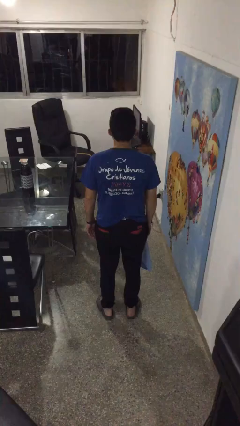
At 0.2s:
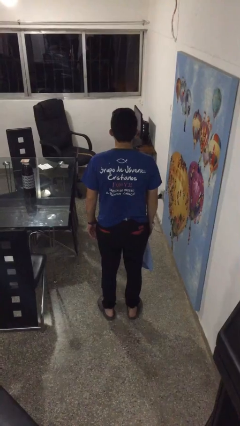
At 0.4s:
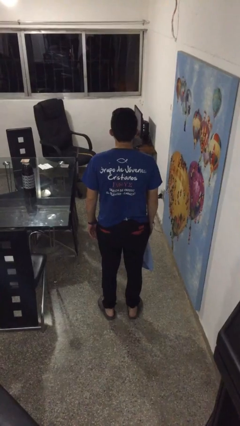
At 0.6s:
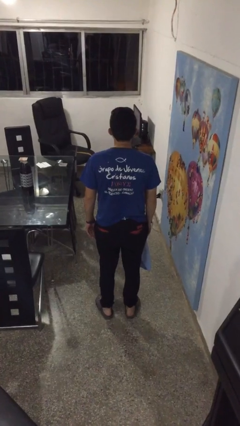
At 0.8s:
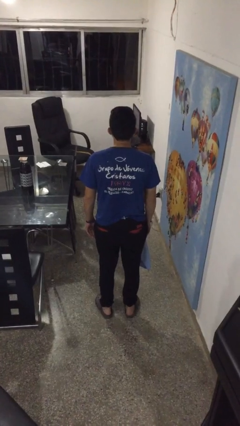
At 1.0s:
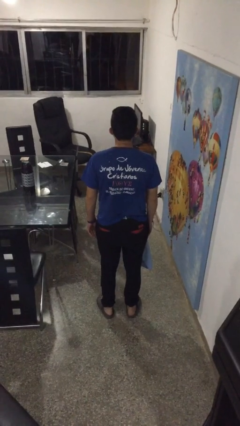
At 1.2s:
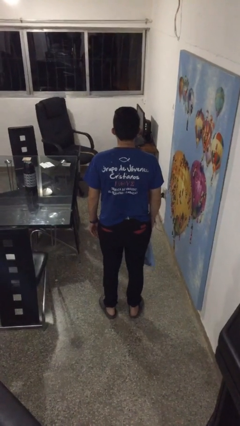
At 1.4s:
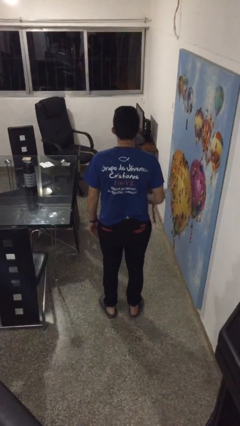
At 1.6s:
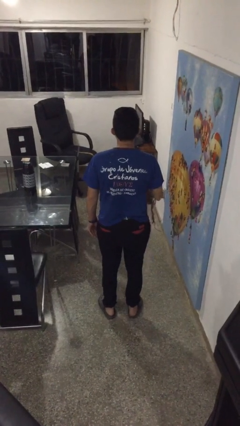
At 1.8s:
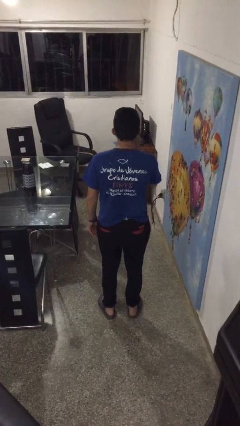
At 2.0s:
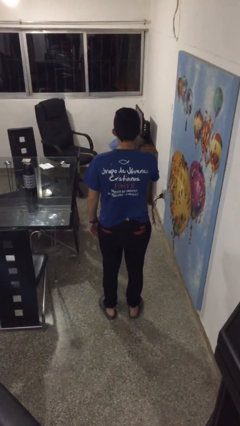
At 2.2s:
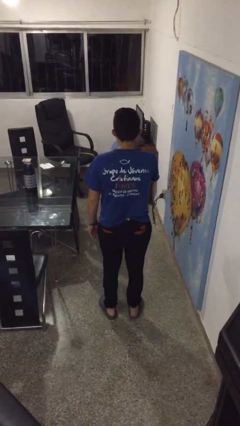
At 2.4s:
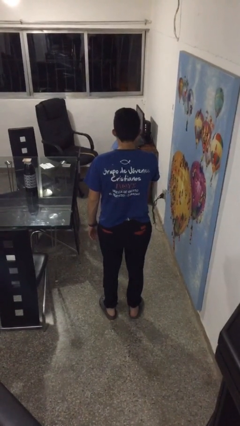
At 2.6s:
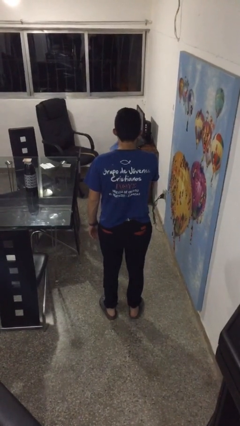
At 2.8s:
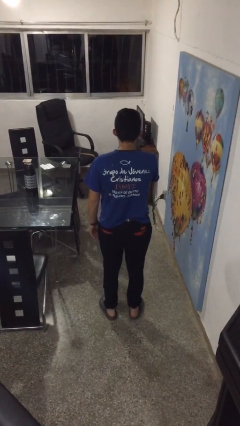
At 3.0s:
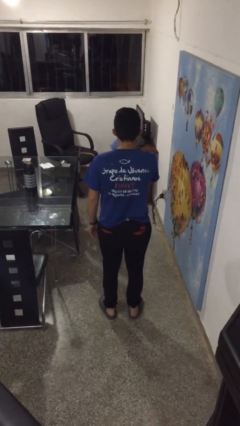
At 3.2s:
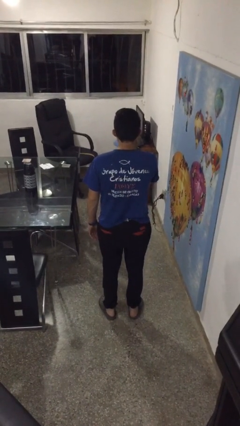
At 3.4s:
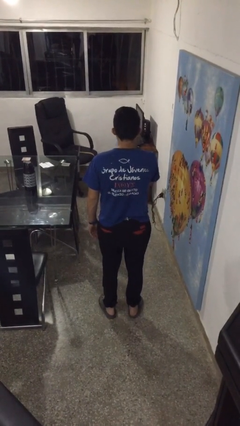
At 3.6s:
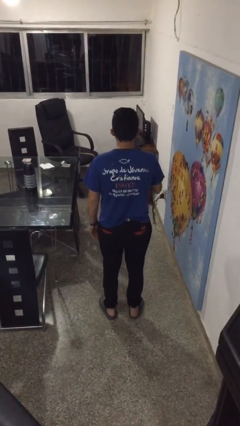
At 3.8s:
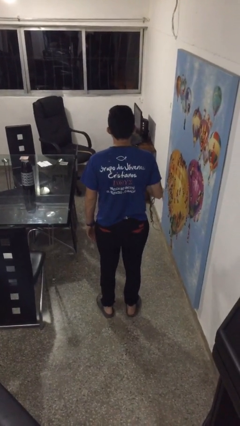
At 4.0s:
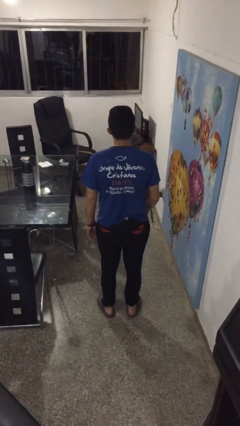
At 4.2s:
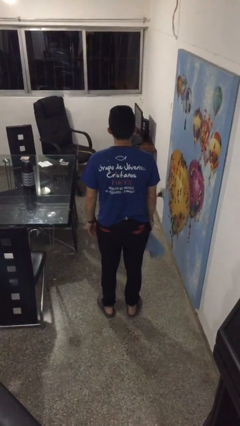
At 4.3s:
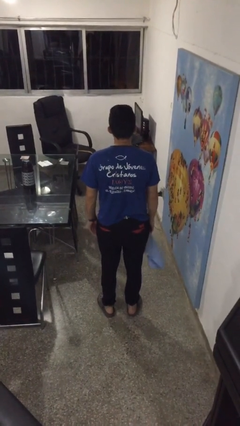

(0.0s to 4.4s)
person wipes mouth with napkin

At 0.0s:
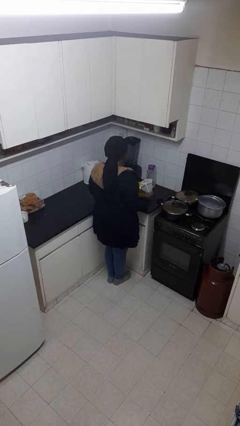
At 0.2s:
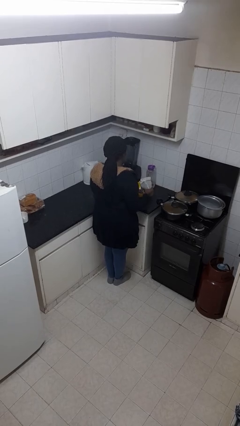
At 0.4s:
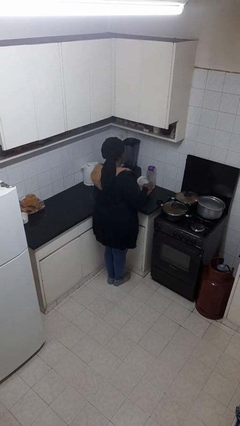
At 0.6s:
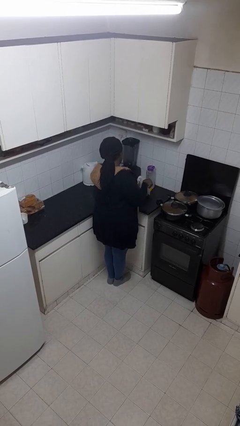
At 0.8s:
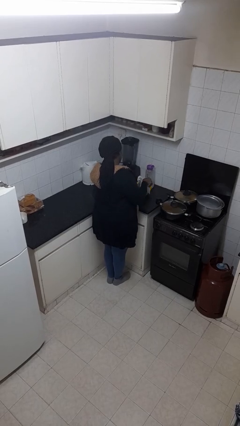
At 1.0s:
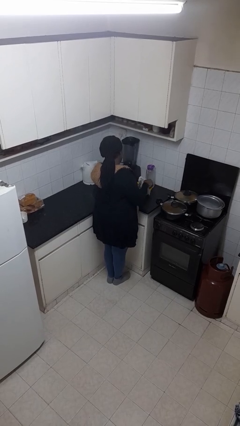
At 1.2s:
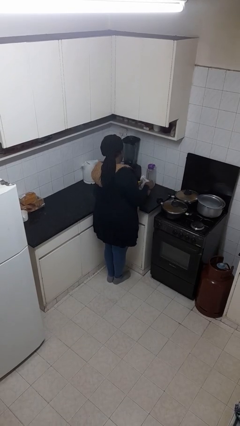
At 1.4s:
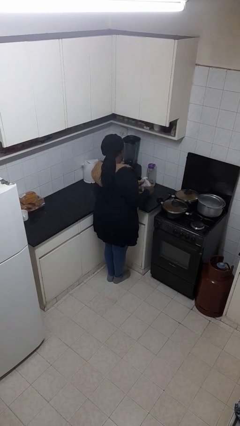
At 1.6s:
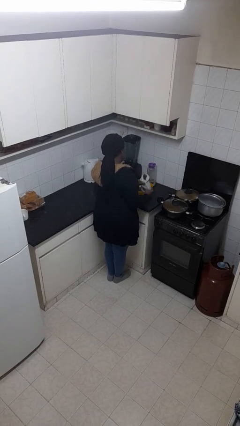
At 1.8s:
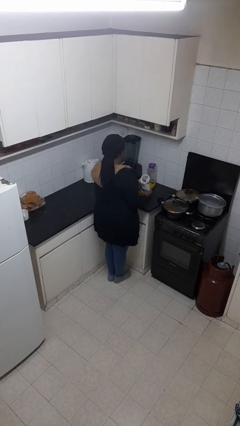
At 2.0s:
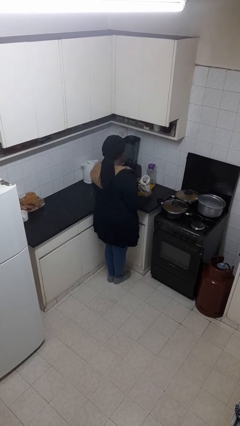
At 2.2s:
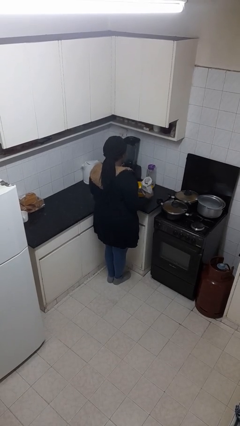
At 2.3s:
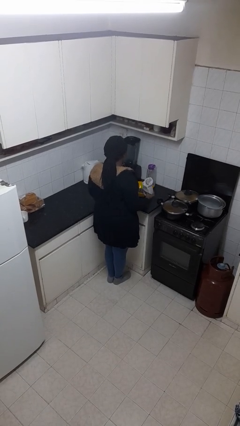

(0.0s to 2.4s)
person pours into bowl

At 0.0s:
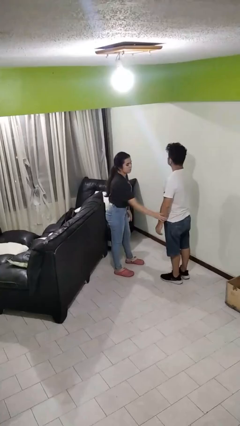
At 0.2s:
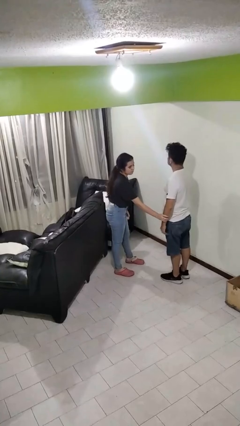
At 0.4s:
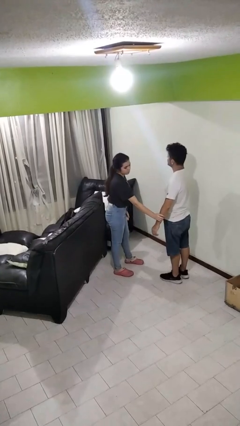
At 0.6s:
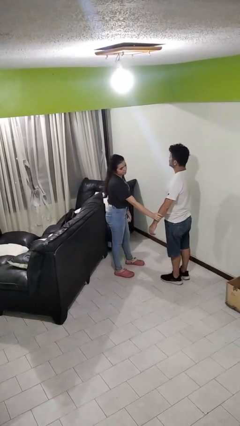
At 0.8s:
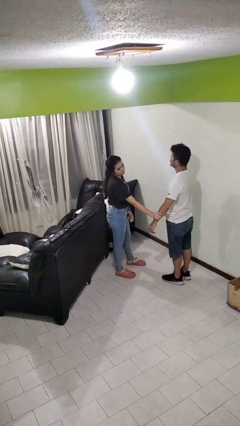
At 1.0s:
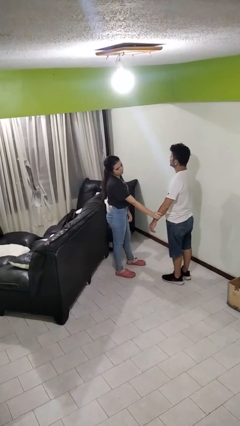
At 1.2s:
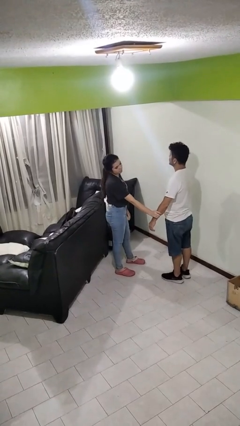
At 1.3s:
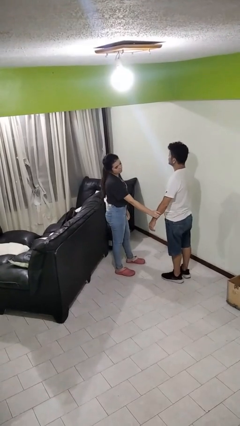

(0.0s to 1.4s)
person grabs person by forearm

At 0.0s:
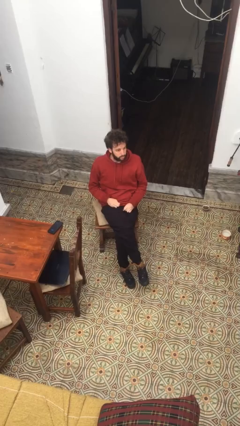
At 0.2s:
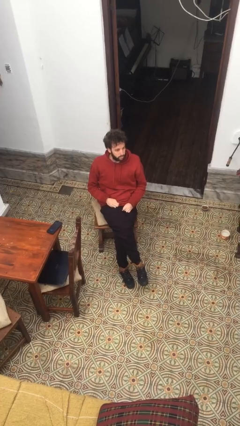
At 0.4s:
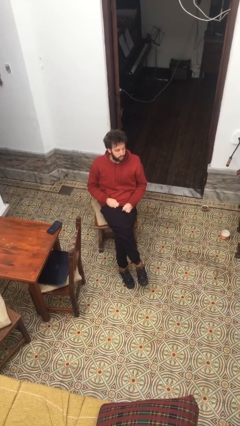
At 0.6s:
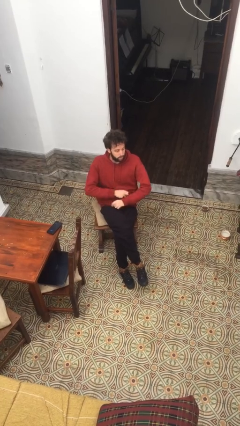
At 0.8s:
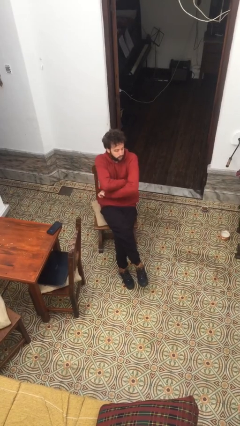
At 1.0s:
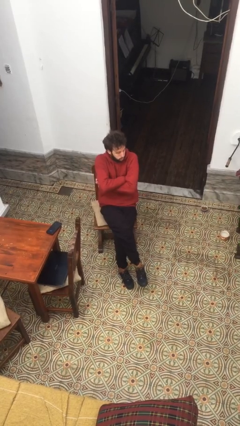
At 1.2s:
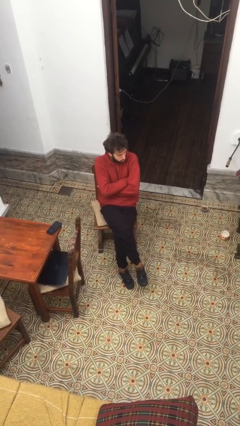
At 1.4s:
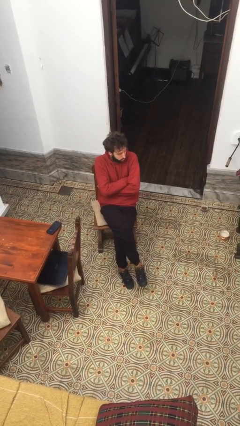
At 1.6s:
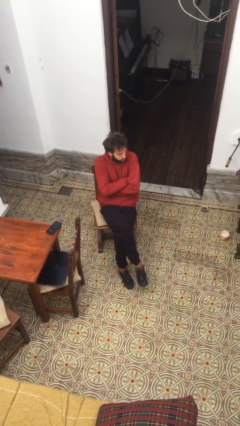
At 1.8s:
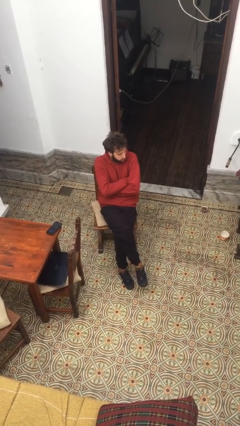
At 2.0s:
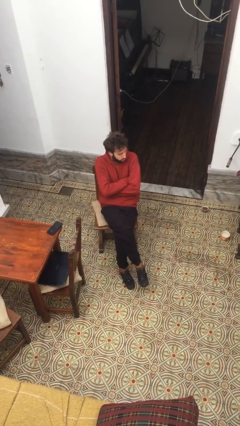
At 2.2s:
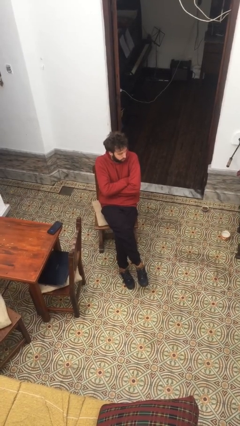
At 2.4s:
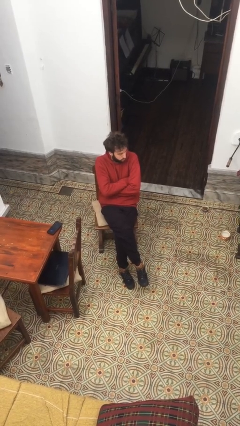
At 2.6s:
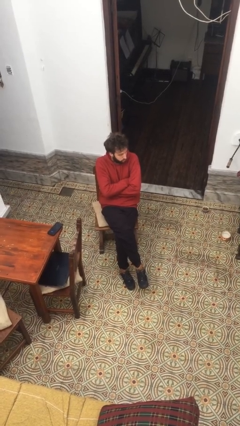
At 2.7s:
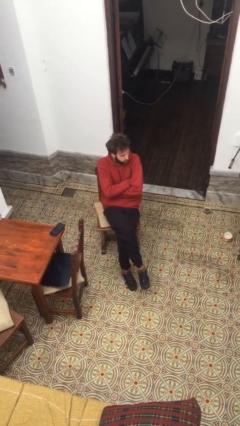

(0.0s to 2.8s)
person crosses arms

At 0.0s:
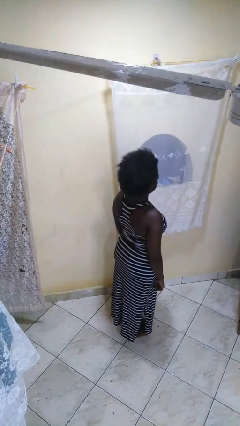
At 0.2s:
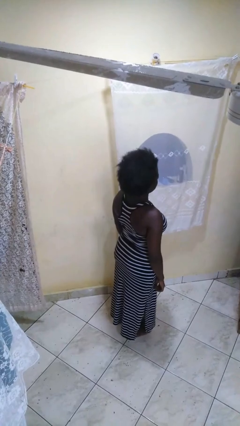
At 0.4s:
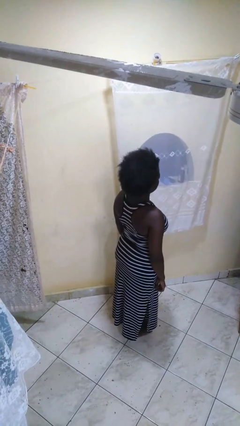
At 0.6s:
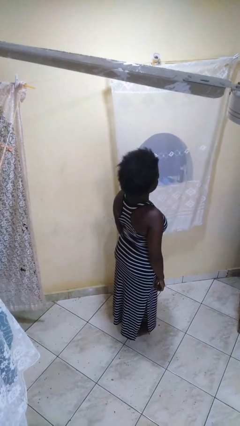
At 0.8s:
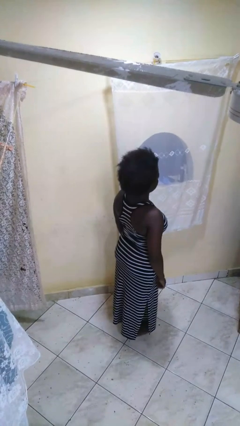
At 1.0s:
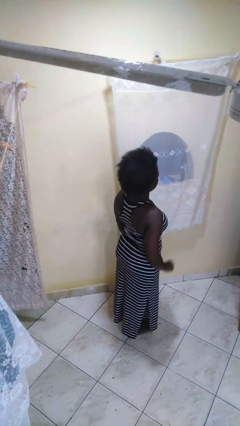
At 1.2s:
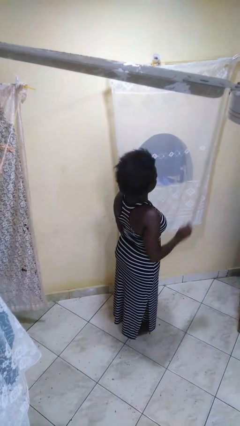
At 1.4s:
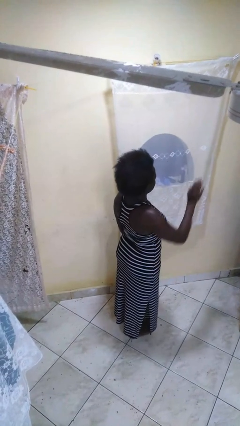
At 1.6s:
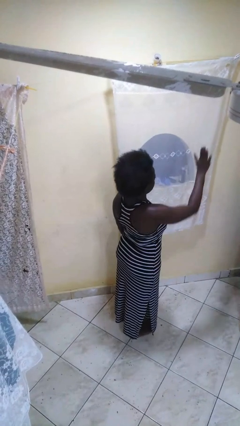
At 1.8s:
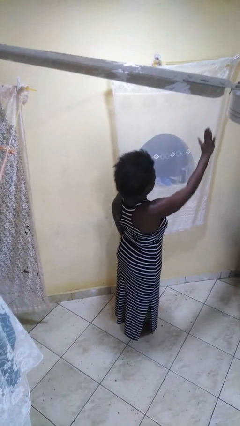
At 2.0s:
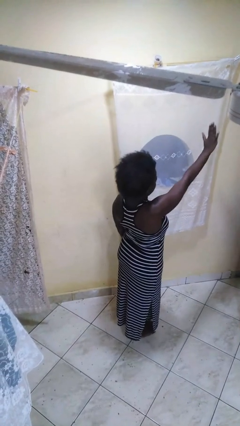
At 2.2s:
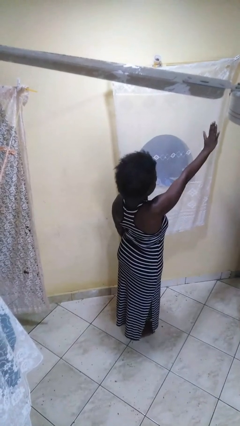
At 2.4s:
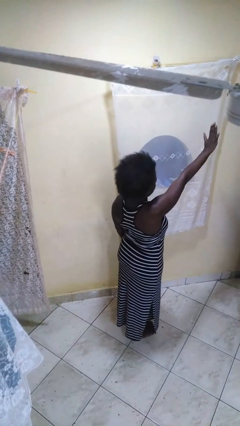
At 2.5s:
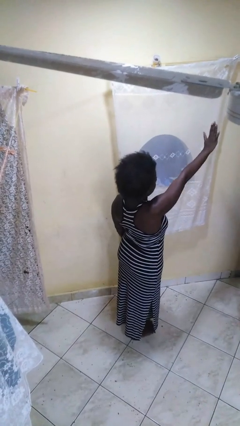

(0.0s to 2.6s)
person gestures stop

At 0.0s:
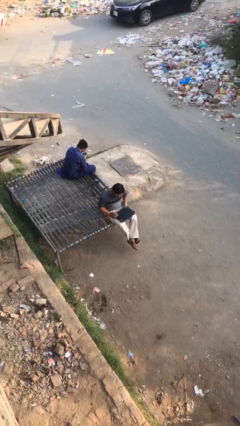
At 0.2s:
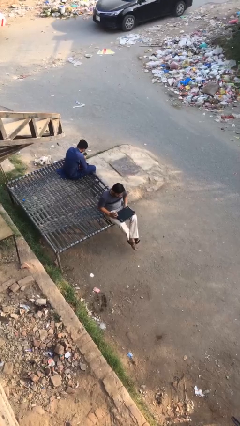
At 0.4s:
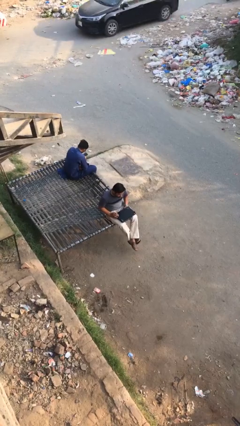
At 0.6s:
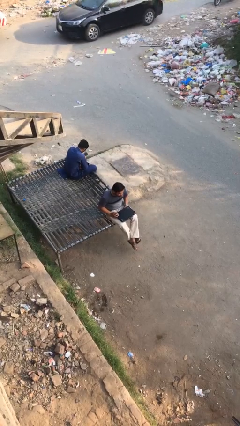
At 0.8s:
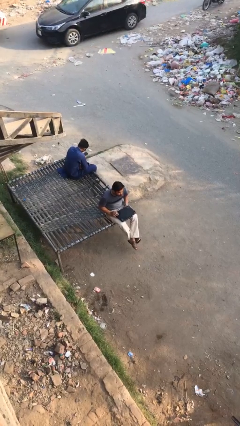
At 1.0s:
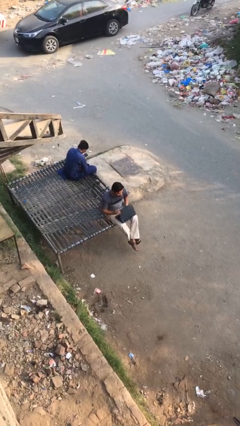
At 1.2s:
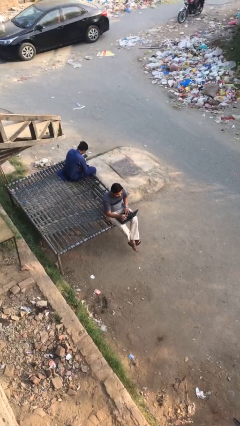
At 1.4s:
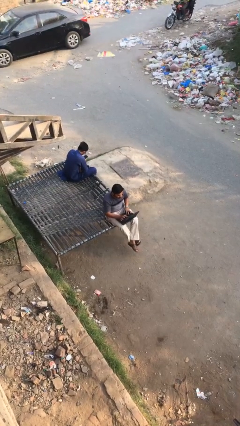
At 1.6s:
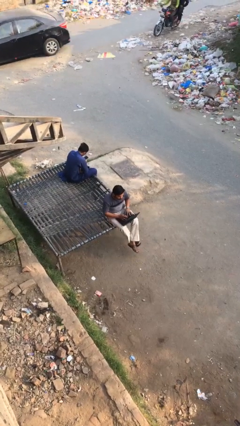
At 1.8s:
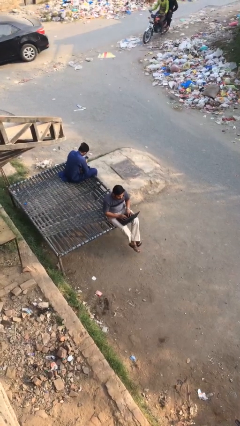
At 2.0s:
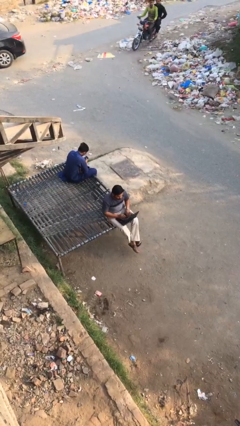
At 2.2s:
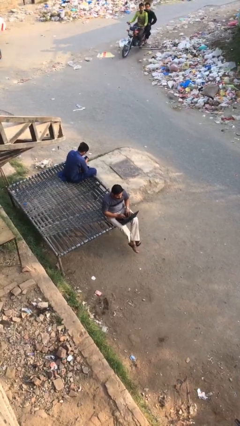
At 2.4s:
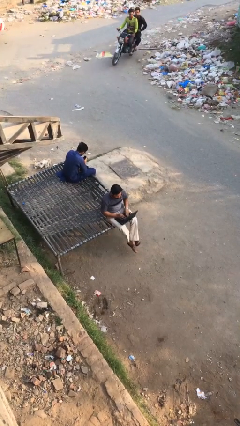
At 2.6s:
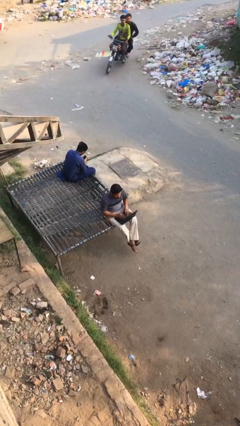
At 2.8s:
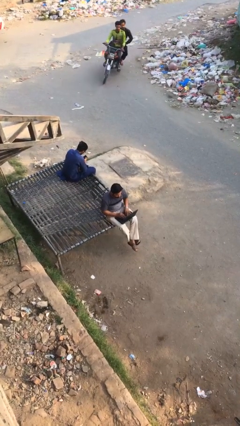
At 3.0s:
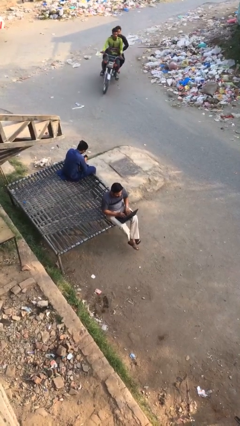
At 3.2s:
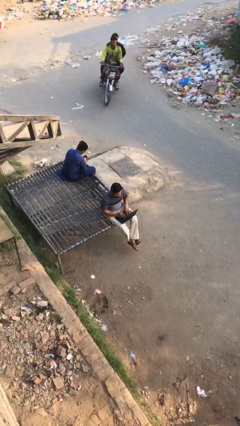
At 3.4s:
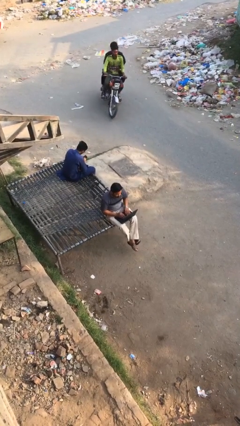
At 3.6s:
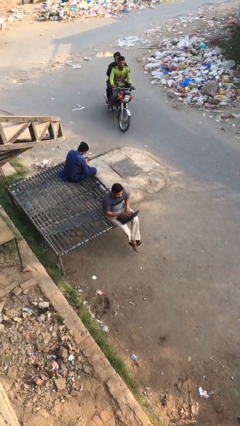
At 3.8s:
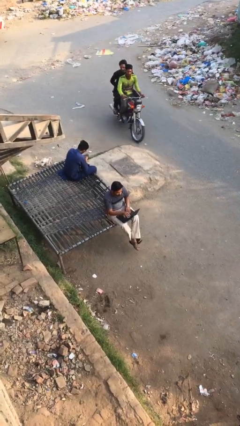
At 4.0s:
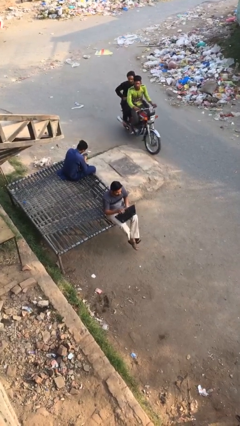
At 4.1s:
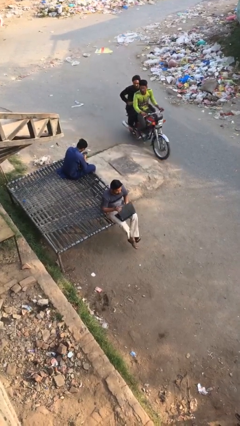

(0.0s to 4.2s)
person interacts with laptop
